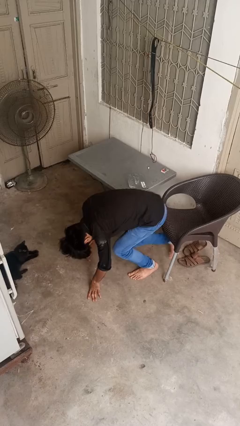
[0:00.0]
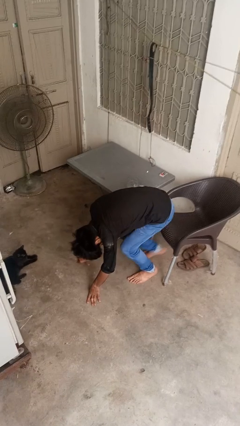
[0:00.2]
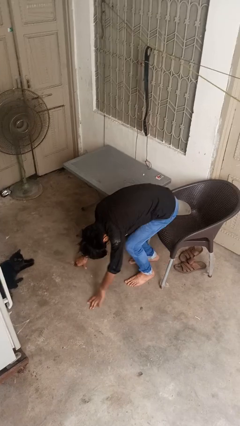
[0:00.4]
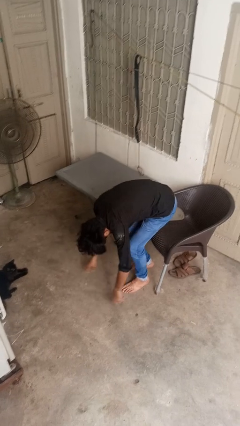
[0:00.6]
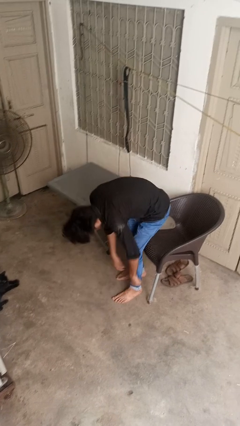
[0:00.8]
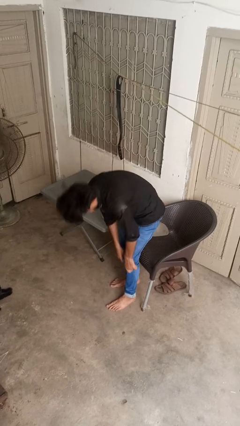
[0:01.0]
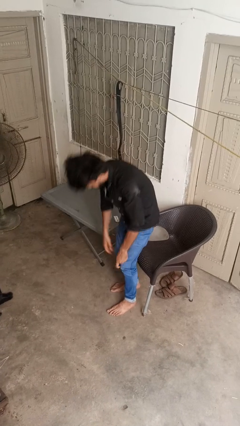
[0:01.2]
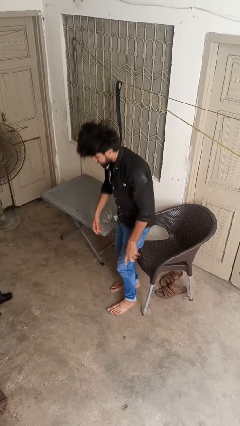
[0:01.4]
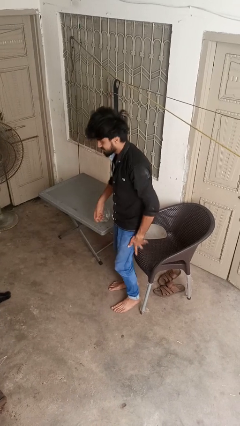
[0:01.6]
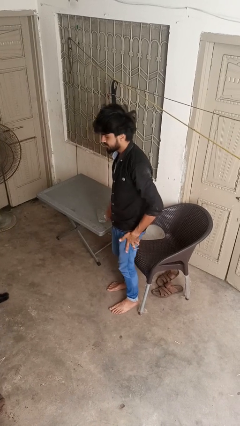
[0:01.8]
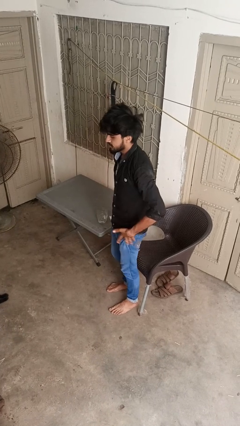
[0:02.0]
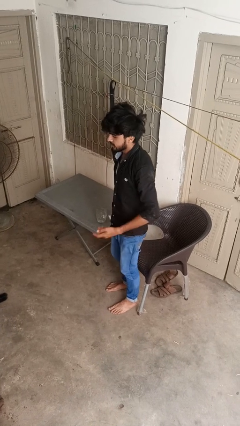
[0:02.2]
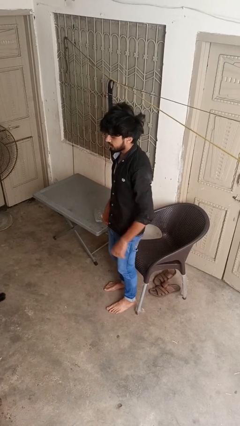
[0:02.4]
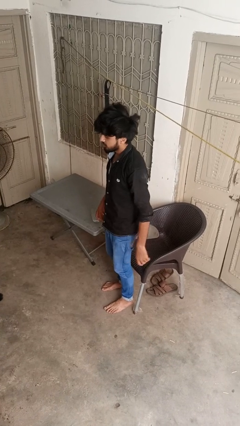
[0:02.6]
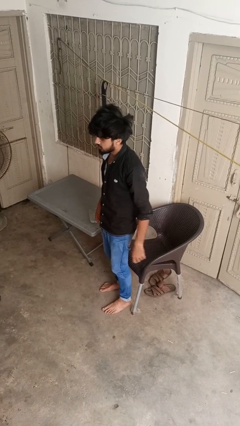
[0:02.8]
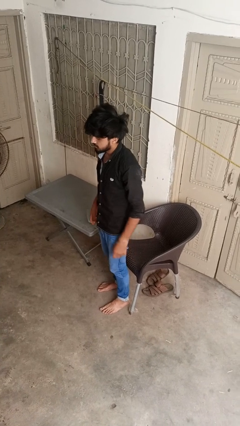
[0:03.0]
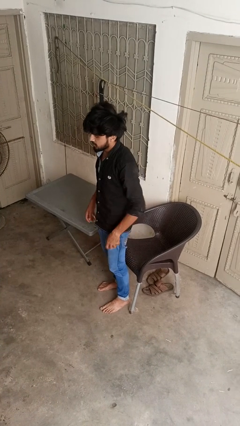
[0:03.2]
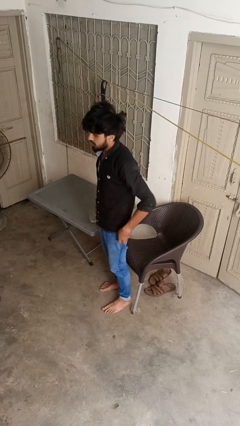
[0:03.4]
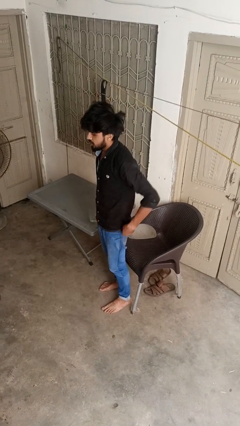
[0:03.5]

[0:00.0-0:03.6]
person stands up from floor

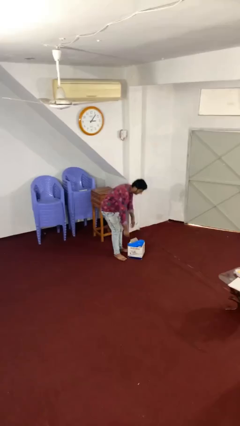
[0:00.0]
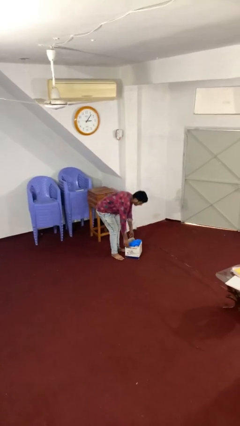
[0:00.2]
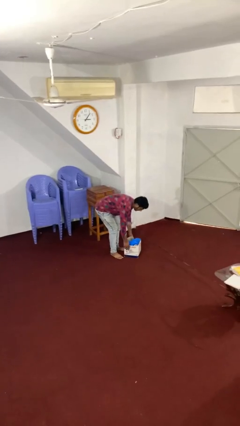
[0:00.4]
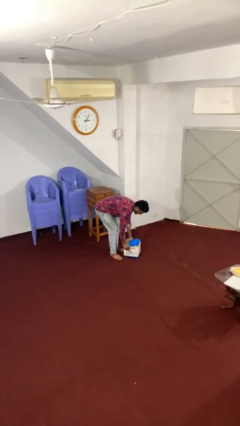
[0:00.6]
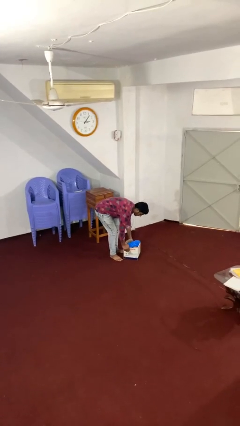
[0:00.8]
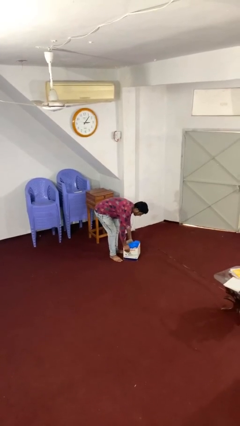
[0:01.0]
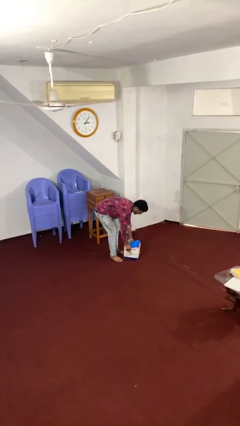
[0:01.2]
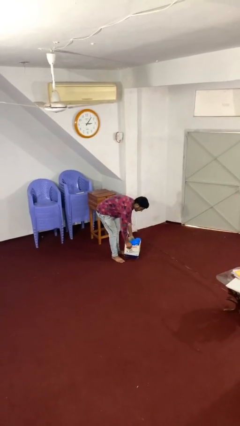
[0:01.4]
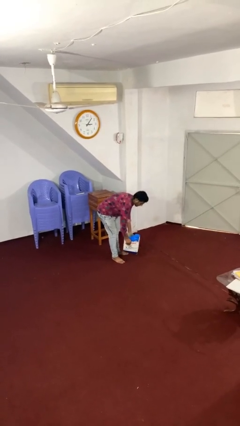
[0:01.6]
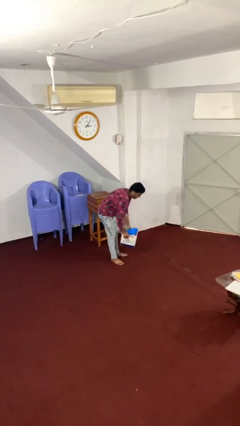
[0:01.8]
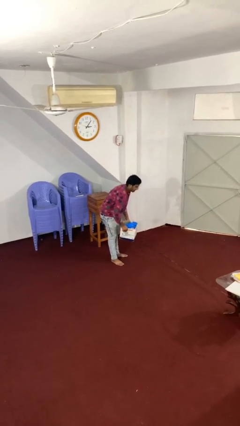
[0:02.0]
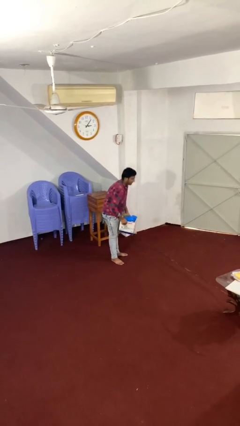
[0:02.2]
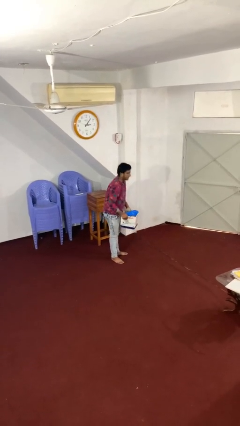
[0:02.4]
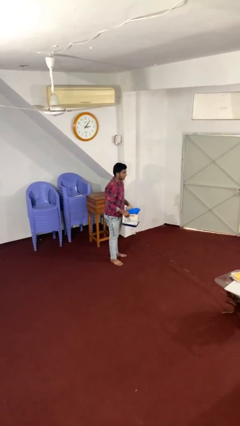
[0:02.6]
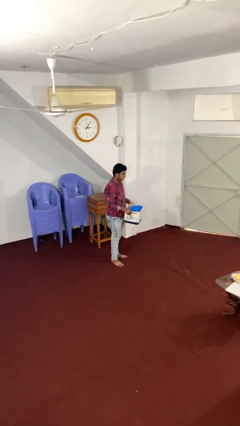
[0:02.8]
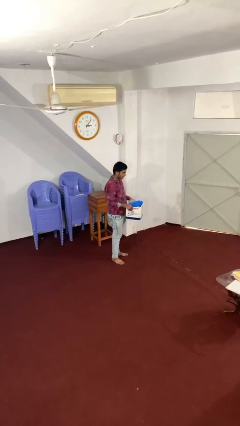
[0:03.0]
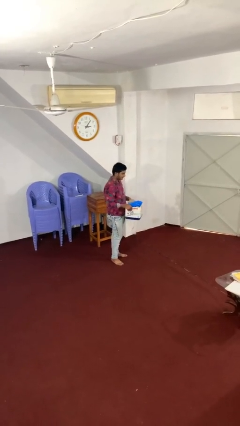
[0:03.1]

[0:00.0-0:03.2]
person picks up object from floor

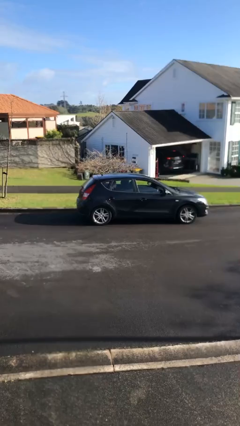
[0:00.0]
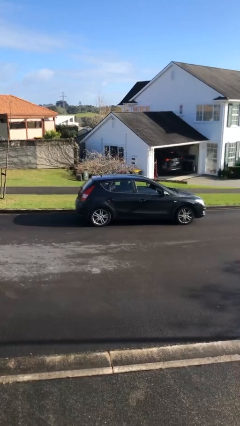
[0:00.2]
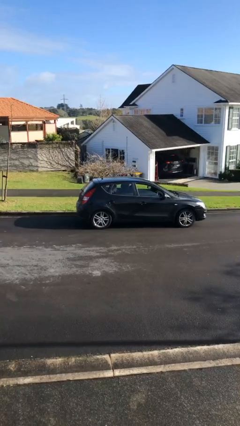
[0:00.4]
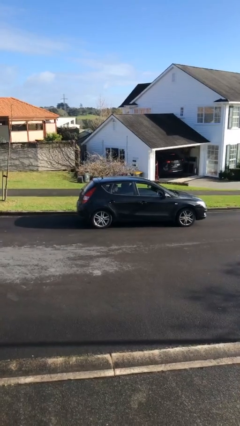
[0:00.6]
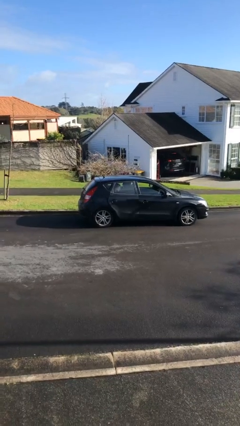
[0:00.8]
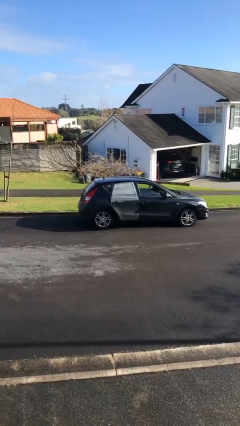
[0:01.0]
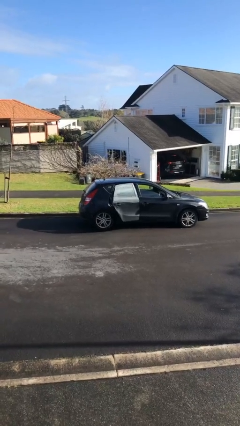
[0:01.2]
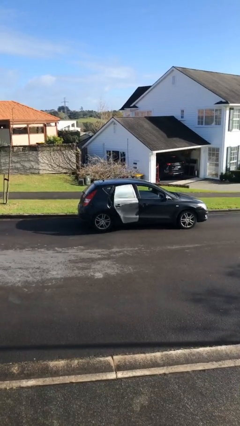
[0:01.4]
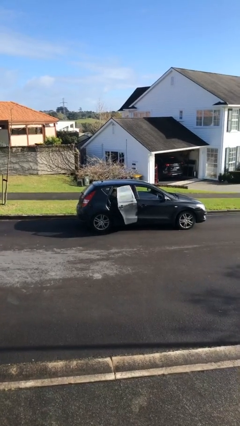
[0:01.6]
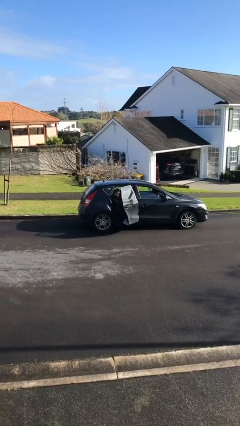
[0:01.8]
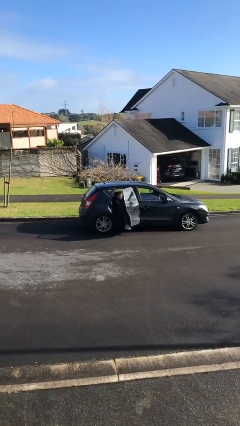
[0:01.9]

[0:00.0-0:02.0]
person opens car door

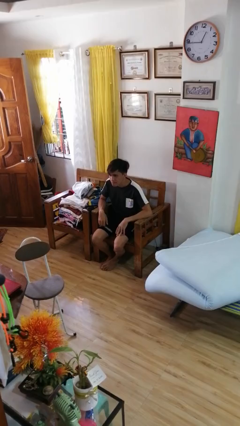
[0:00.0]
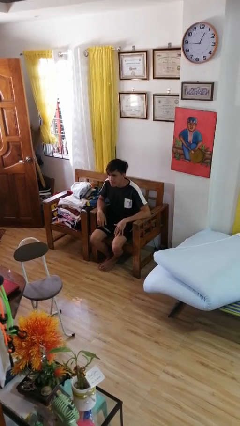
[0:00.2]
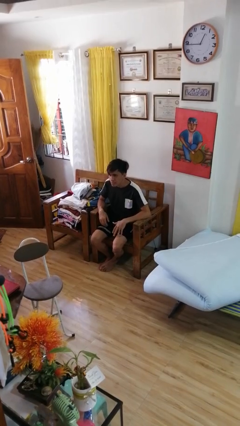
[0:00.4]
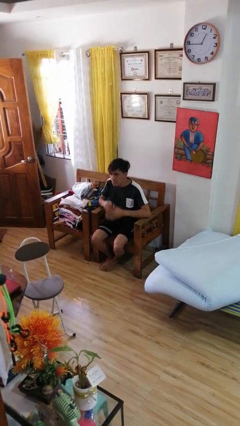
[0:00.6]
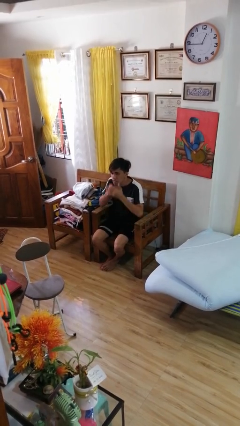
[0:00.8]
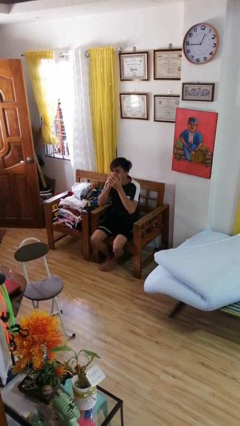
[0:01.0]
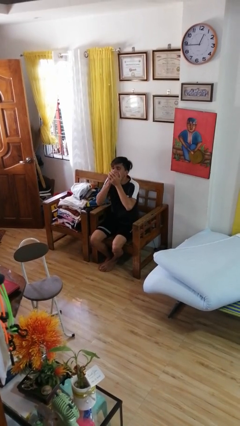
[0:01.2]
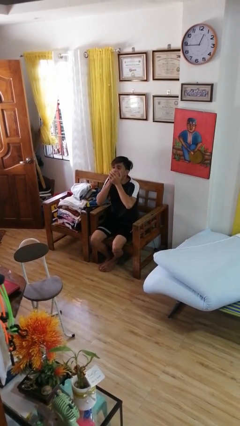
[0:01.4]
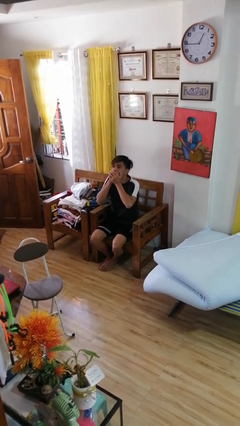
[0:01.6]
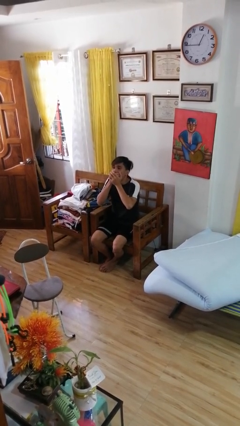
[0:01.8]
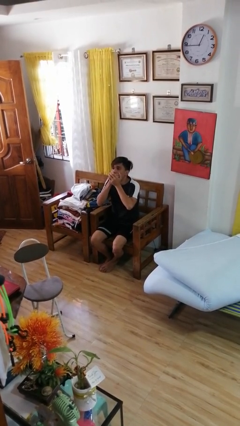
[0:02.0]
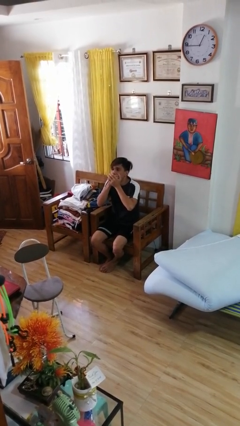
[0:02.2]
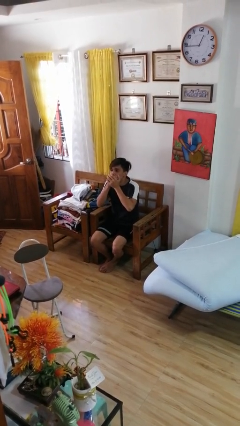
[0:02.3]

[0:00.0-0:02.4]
person yawns

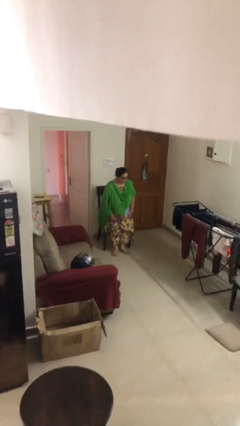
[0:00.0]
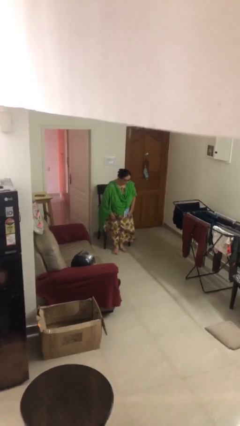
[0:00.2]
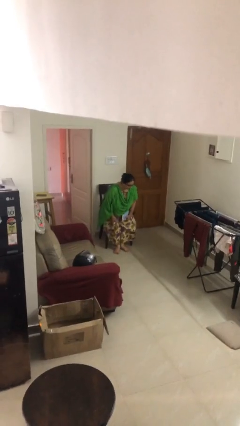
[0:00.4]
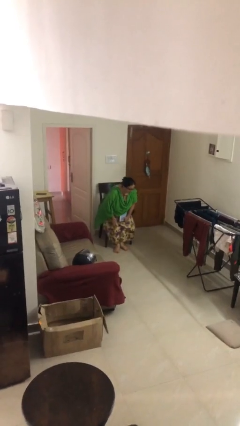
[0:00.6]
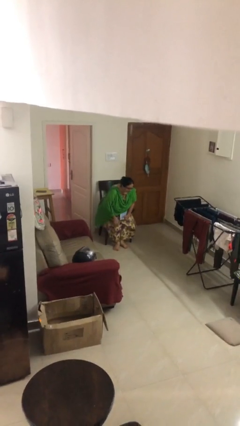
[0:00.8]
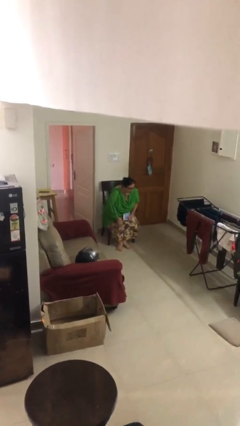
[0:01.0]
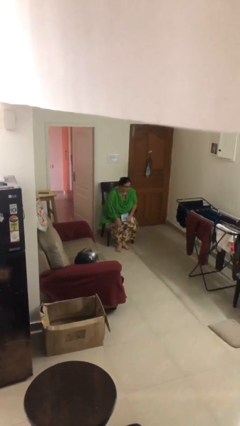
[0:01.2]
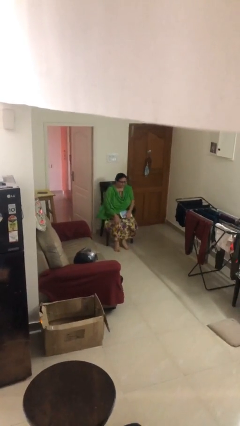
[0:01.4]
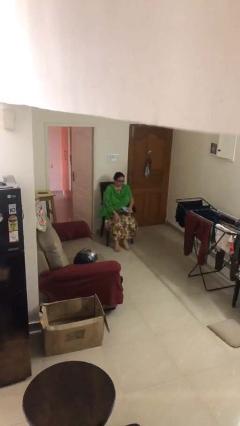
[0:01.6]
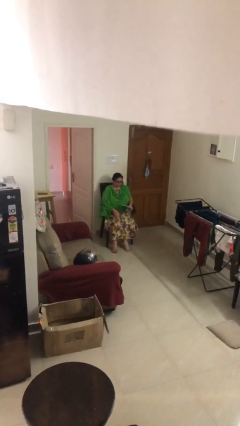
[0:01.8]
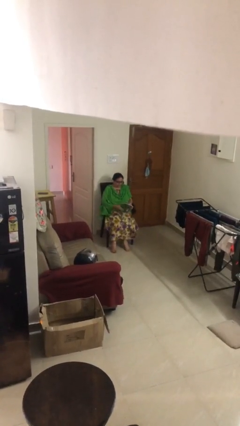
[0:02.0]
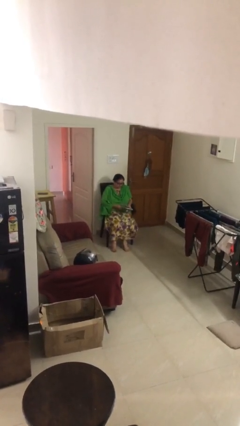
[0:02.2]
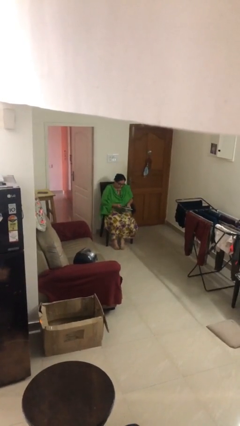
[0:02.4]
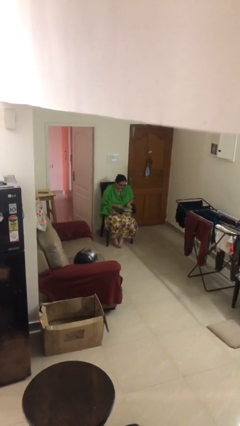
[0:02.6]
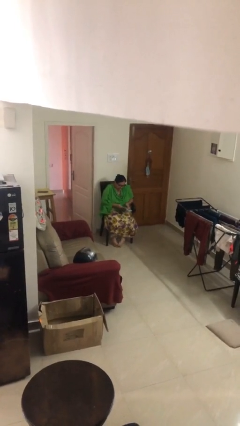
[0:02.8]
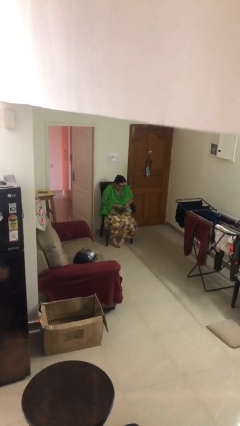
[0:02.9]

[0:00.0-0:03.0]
person sits down

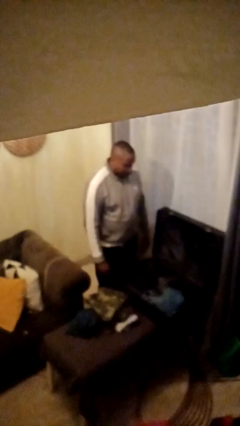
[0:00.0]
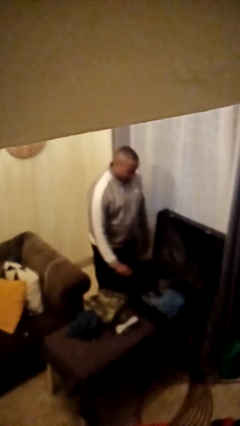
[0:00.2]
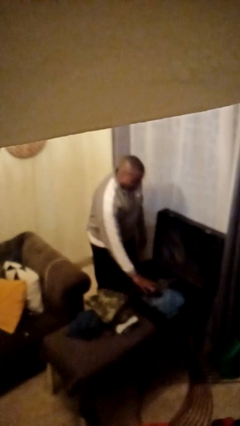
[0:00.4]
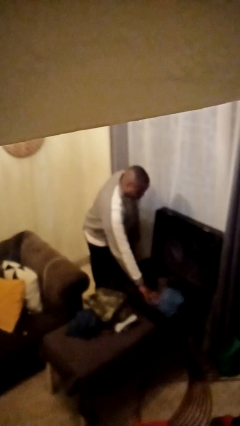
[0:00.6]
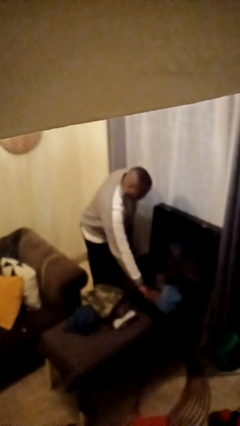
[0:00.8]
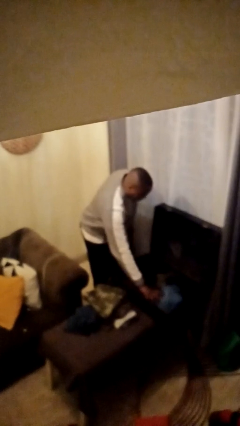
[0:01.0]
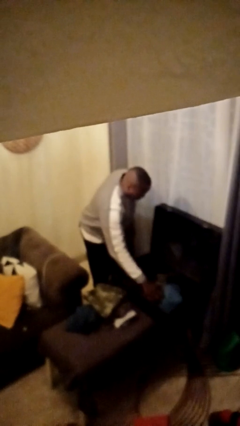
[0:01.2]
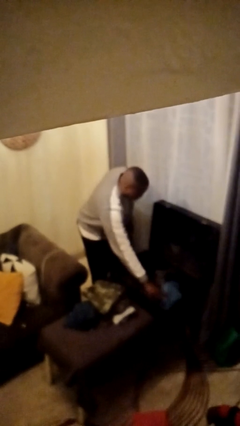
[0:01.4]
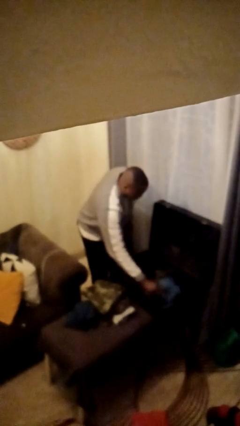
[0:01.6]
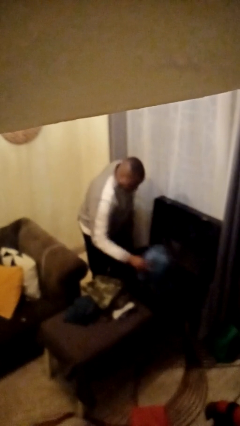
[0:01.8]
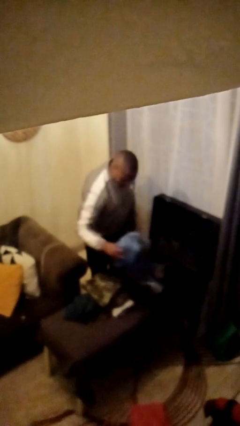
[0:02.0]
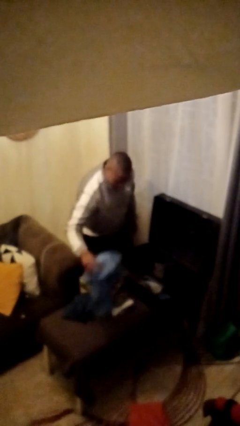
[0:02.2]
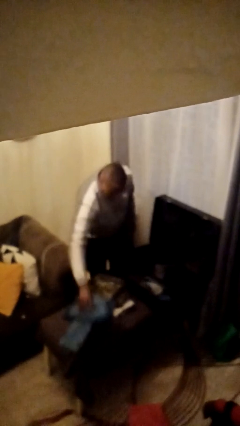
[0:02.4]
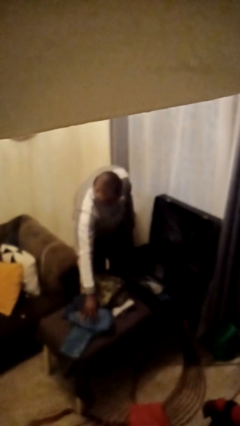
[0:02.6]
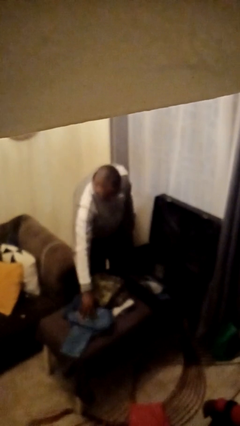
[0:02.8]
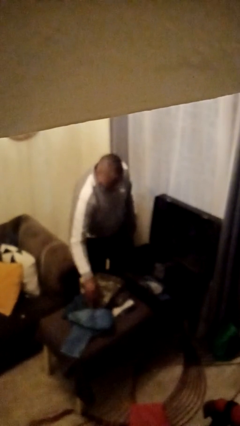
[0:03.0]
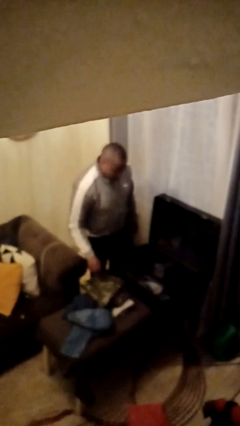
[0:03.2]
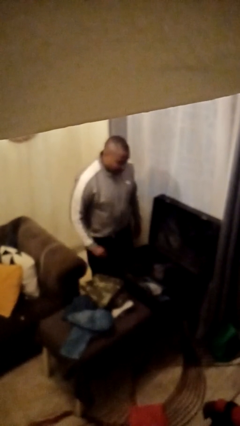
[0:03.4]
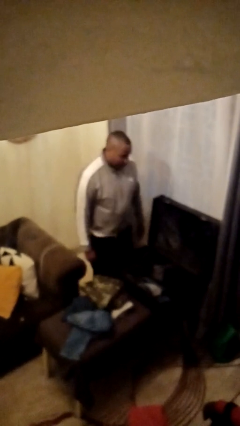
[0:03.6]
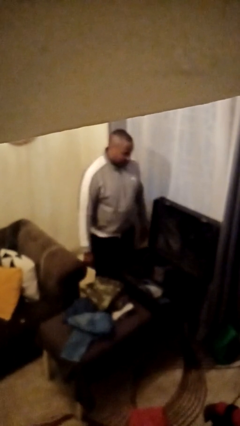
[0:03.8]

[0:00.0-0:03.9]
person unloads clothes from suitcase
